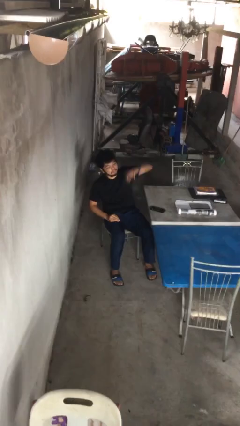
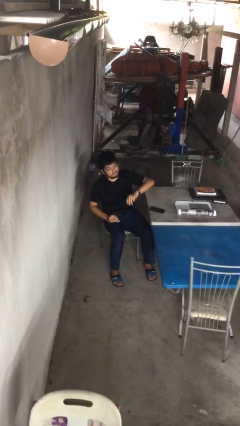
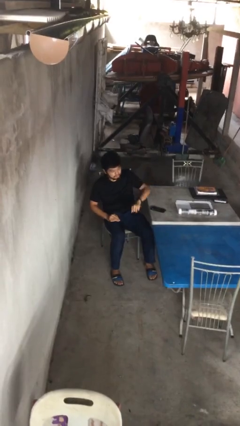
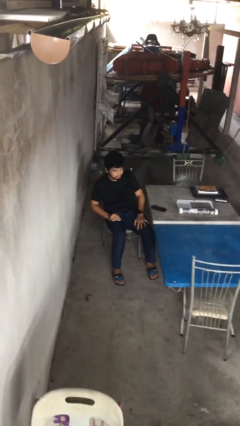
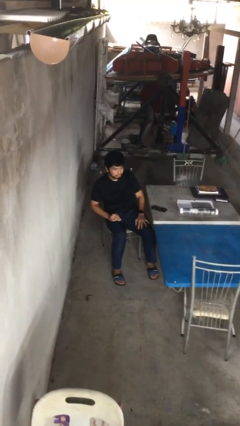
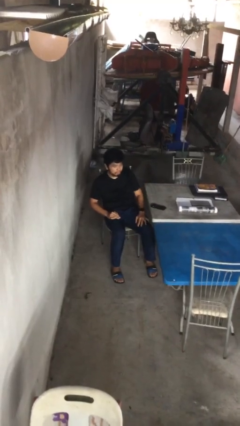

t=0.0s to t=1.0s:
person gestures swipe down

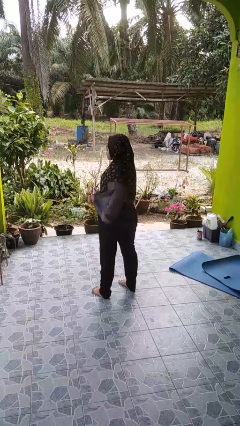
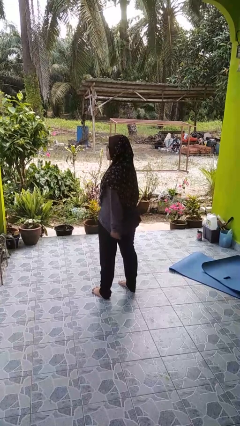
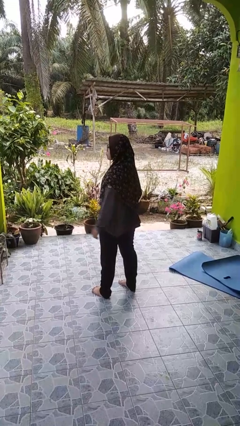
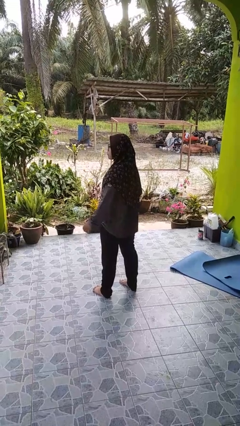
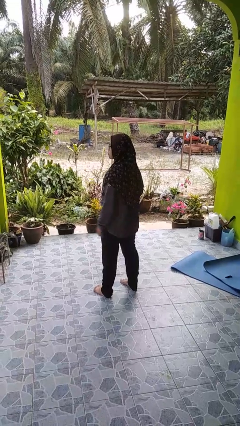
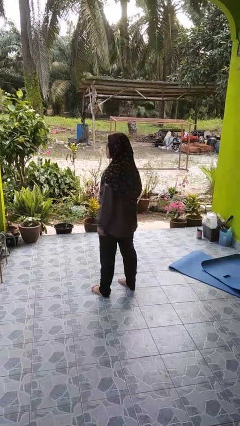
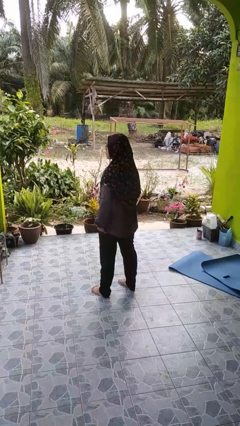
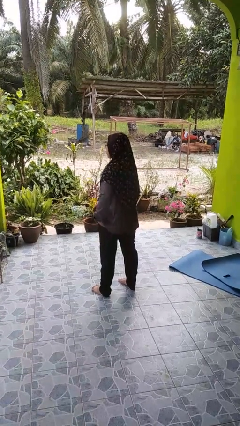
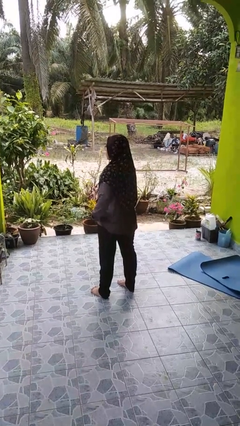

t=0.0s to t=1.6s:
person untucks shirt

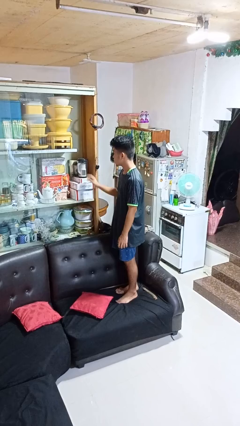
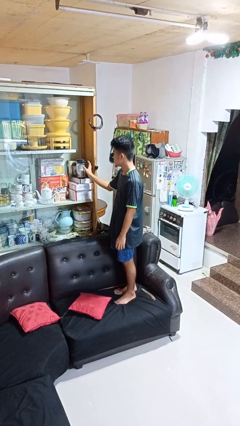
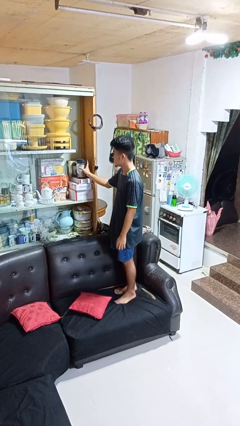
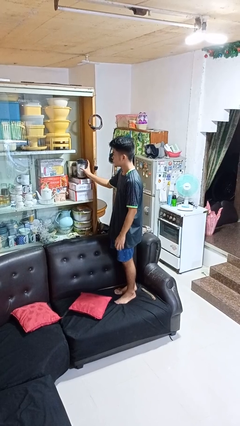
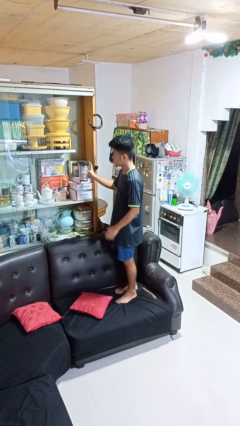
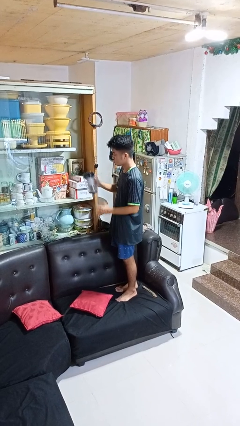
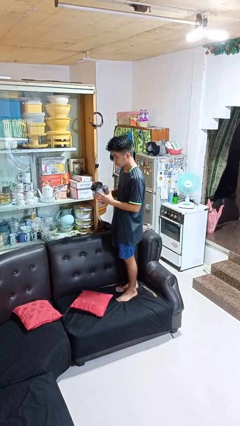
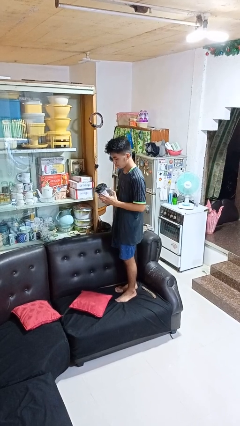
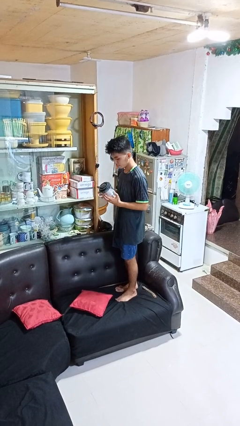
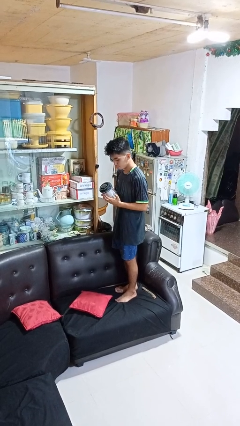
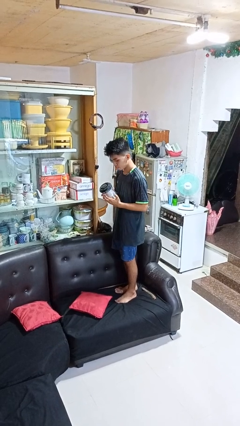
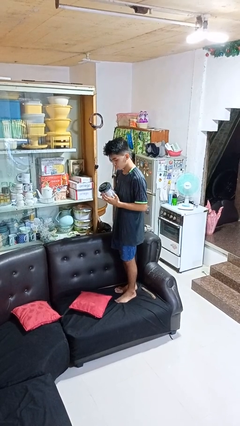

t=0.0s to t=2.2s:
person picks up object from cabinet

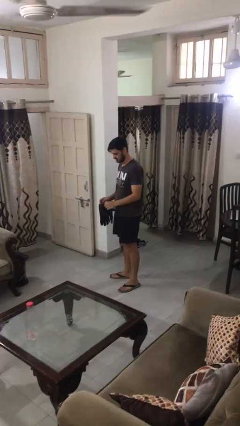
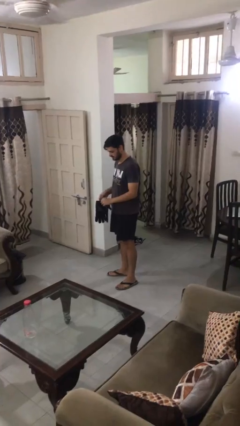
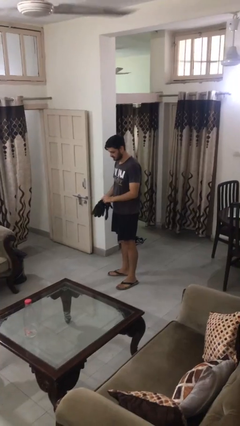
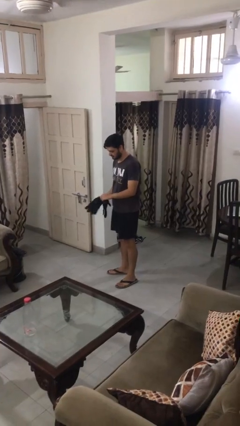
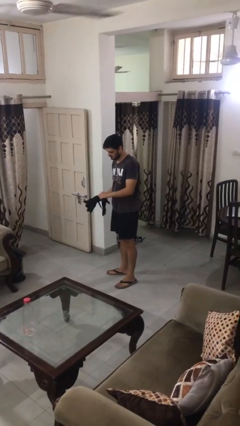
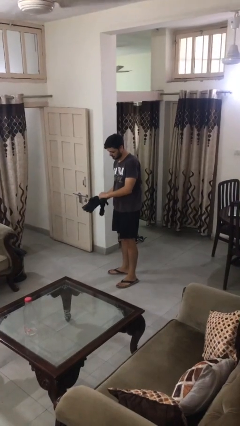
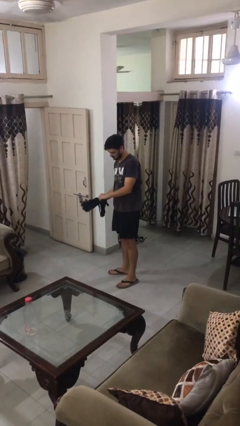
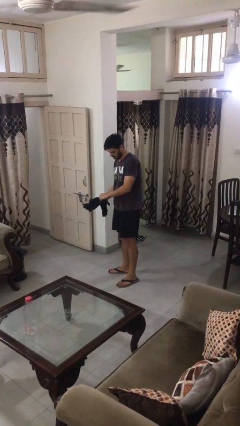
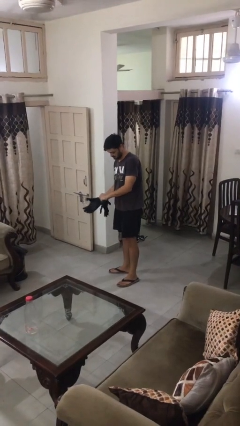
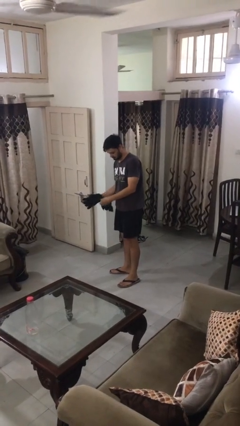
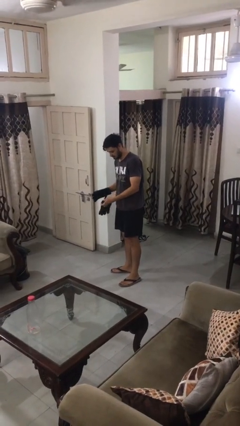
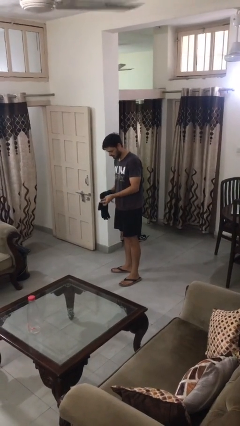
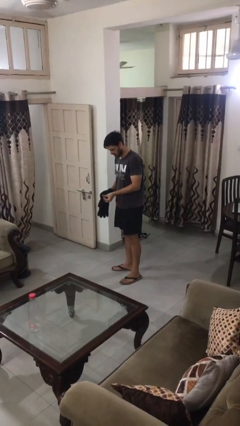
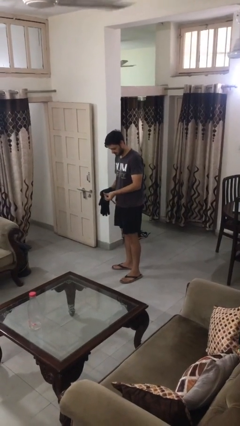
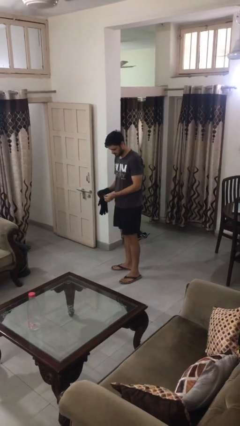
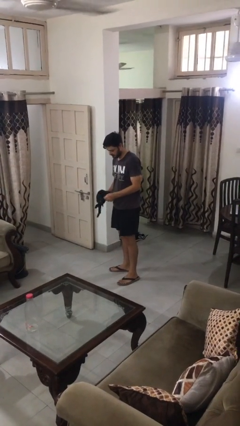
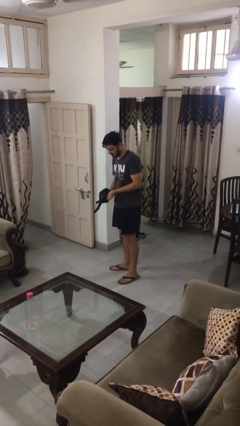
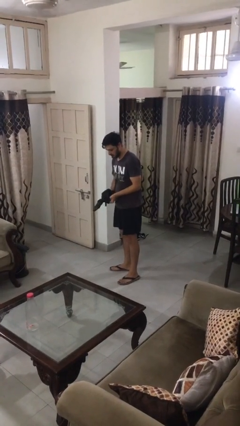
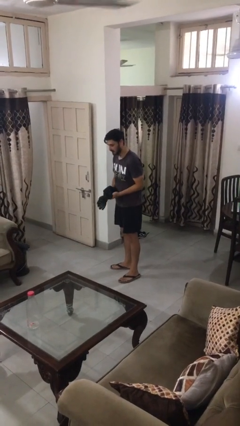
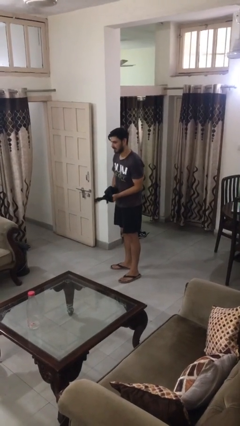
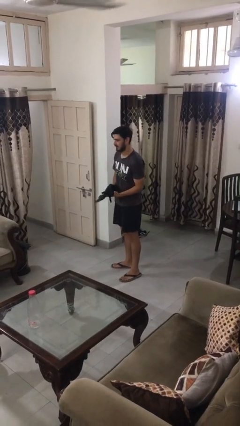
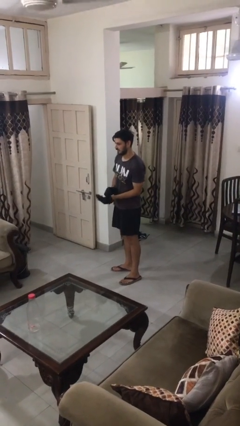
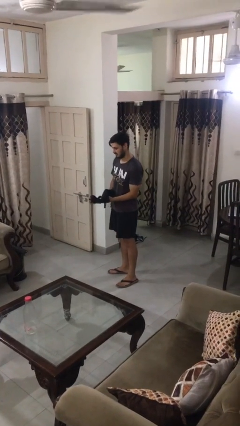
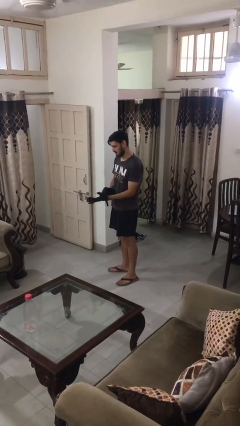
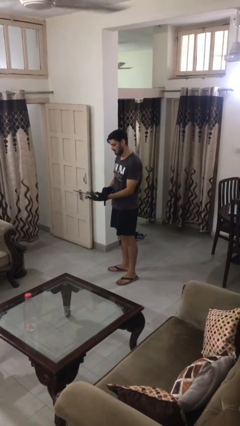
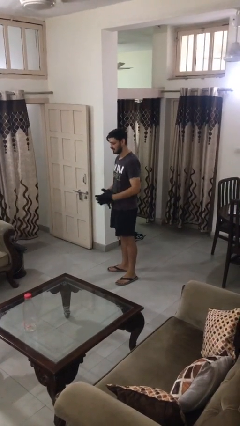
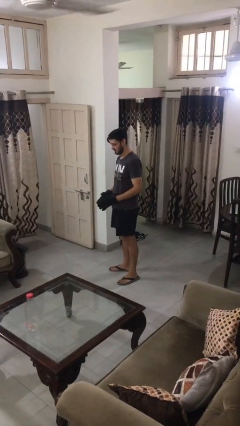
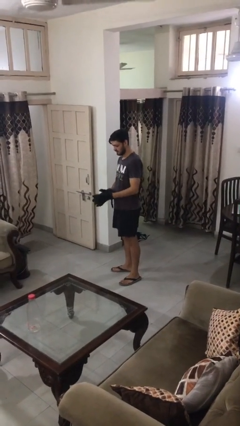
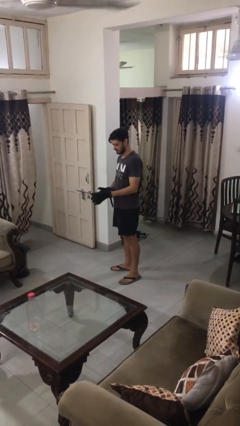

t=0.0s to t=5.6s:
person puts on gloves

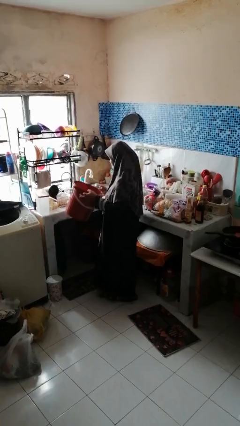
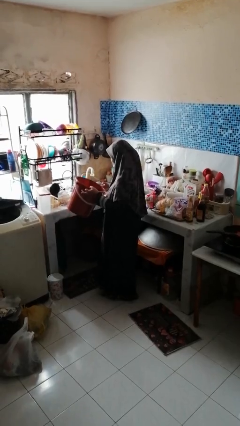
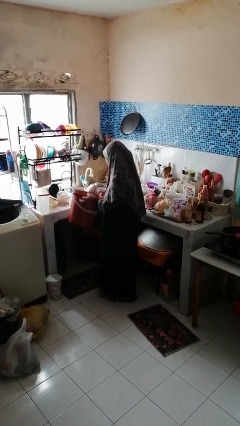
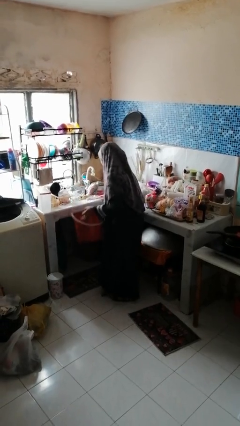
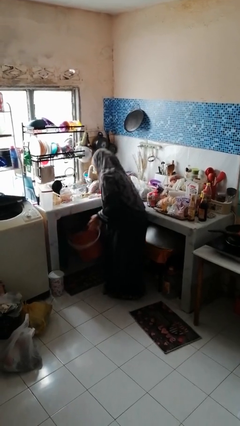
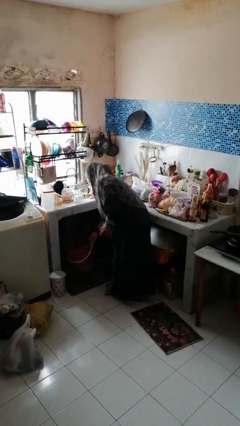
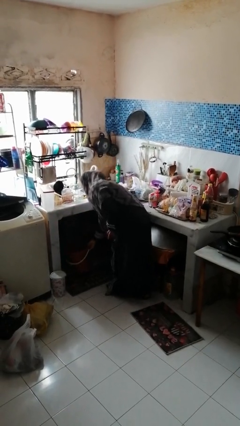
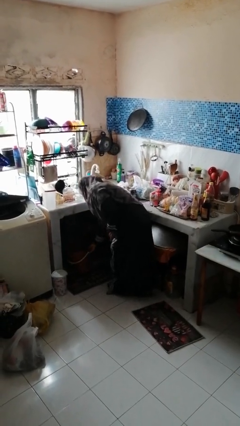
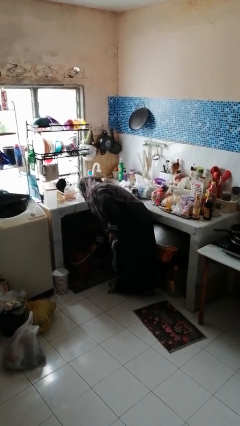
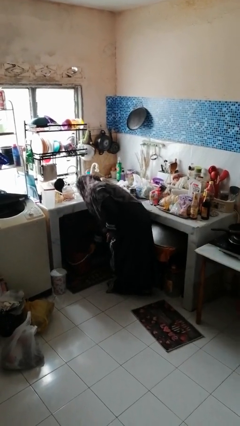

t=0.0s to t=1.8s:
person puts down object into cabinet

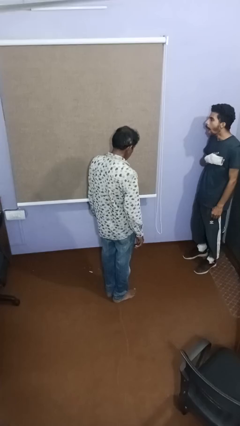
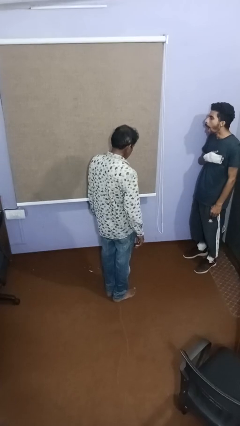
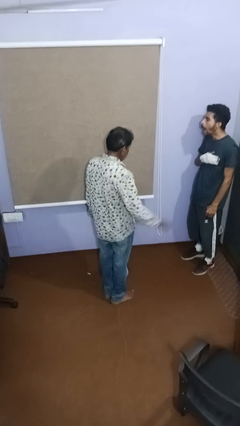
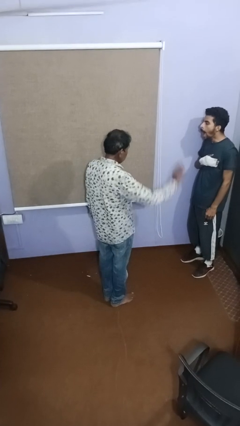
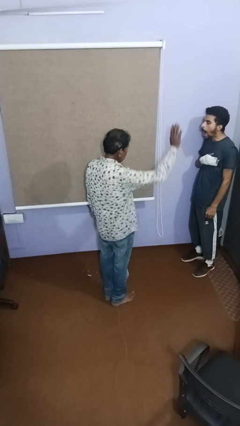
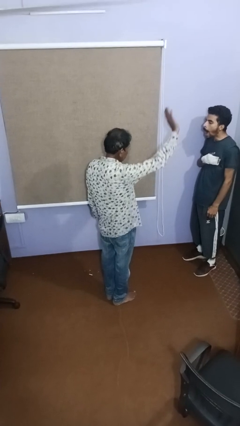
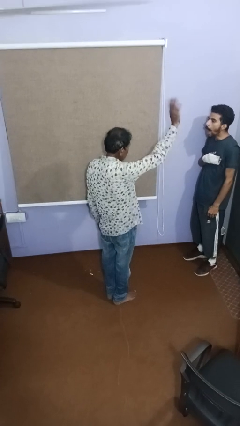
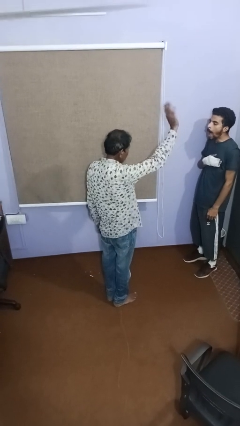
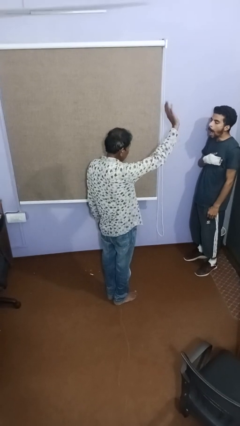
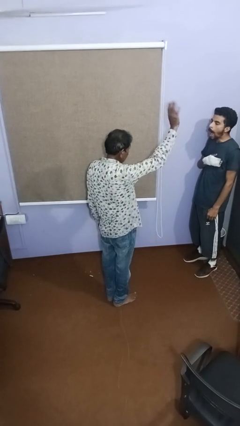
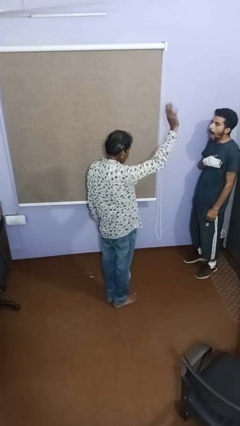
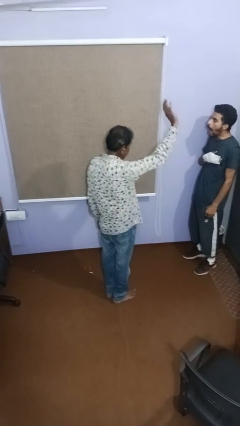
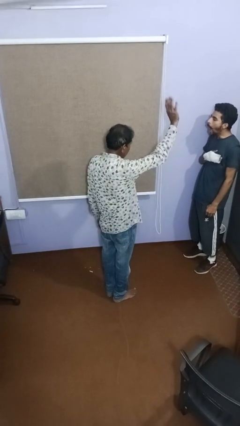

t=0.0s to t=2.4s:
person waves at person

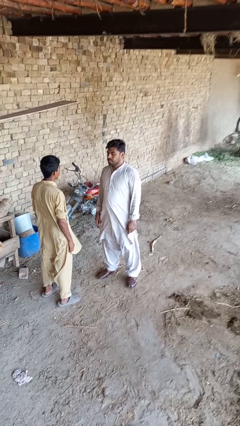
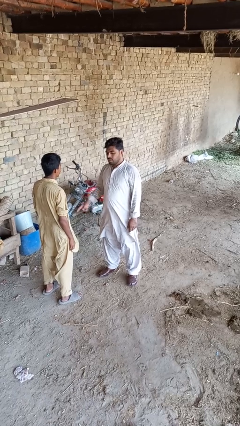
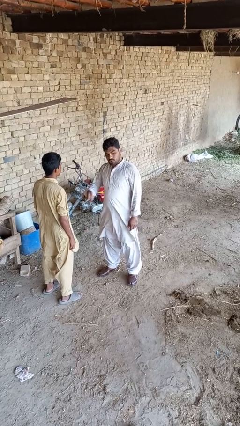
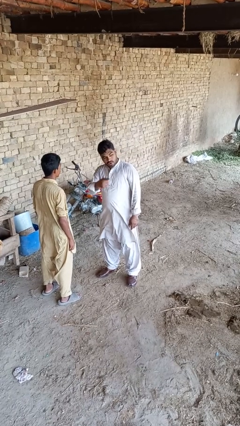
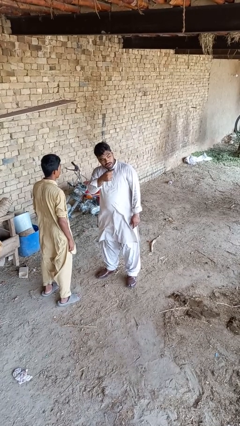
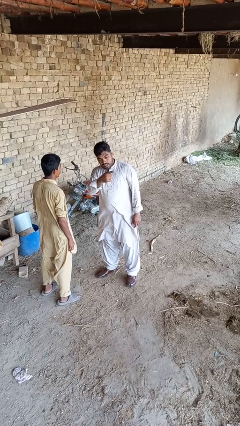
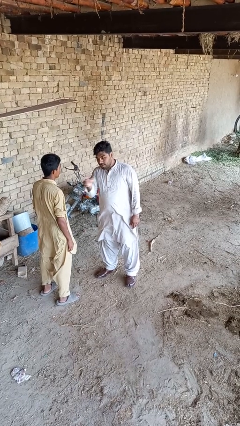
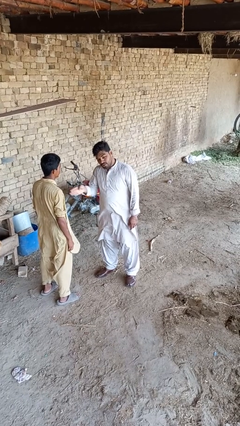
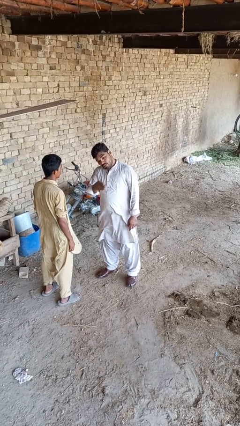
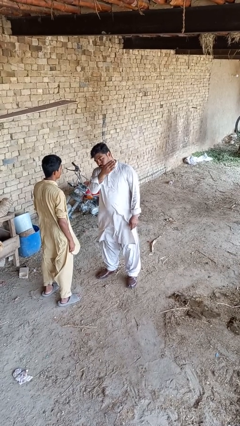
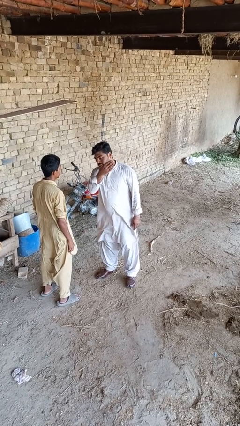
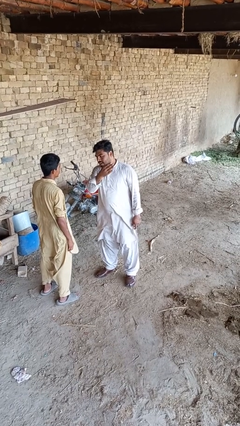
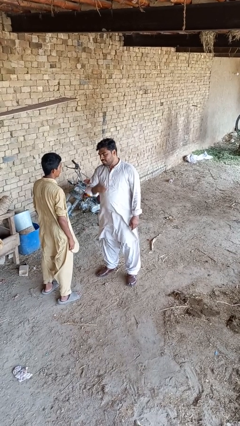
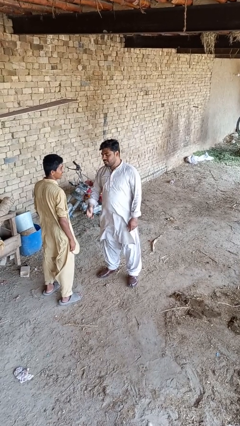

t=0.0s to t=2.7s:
person shoves person
